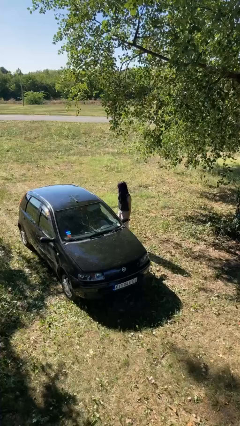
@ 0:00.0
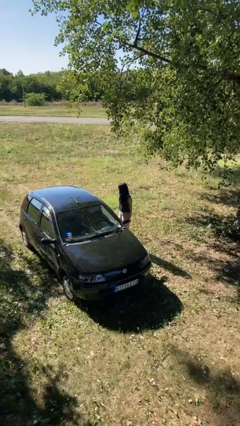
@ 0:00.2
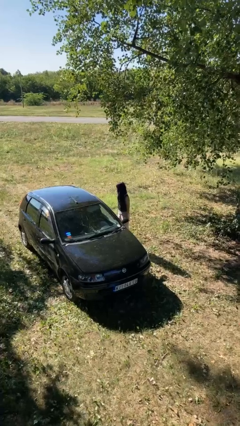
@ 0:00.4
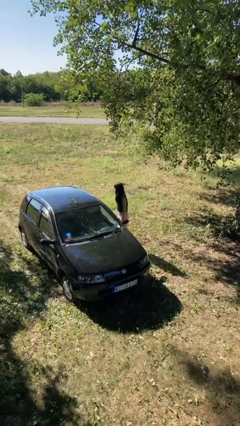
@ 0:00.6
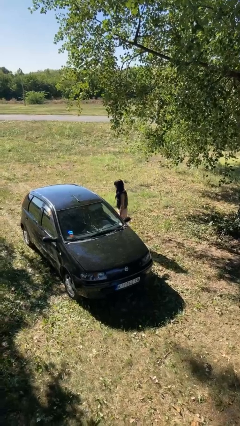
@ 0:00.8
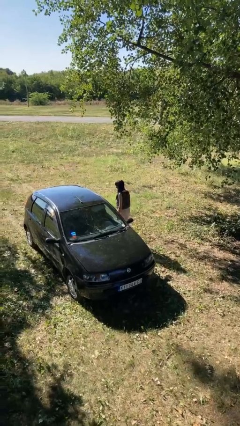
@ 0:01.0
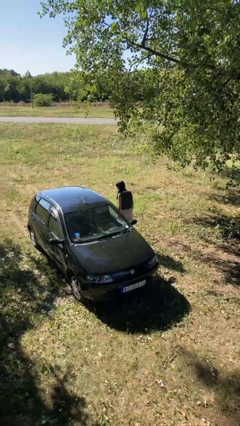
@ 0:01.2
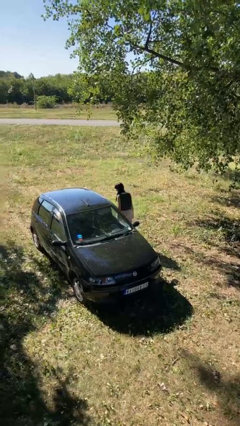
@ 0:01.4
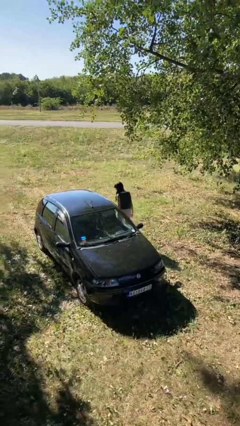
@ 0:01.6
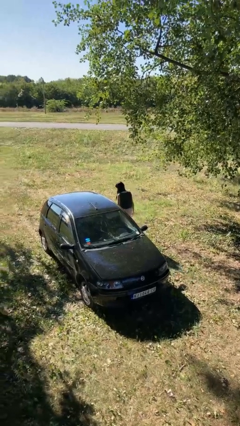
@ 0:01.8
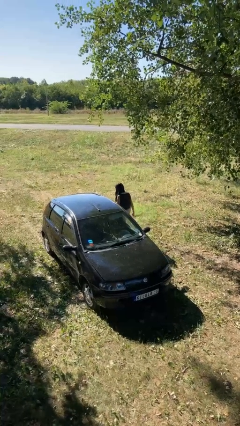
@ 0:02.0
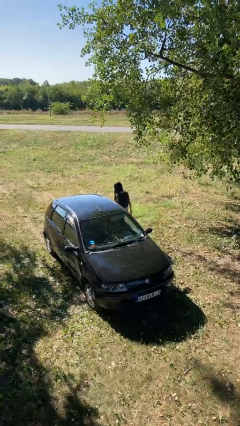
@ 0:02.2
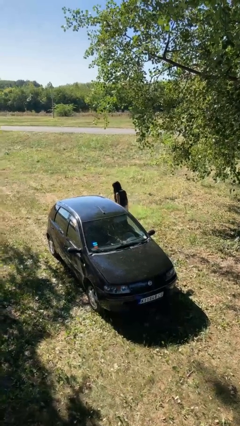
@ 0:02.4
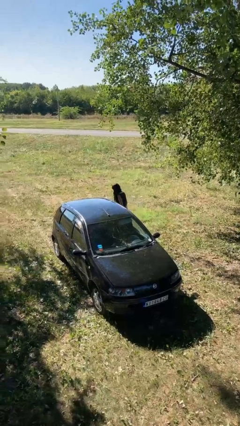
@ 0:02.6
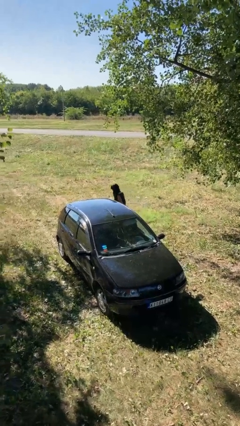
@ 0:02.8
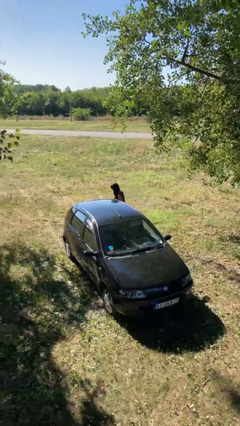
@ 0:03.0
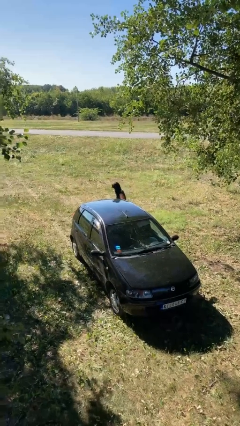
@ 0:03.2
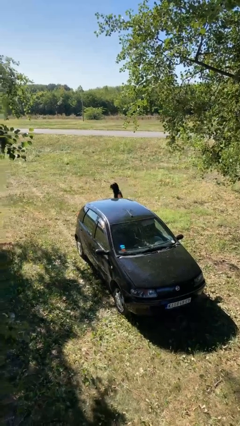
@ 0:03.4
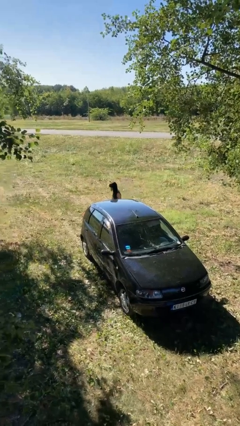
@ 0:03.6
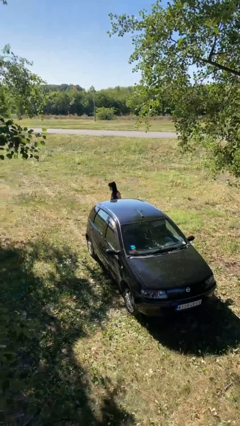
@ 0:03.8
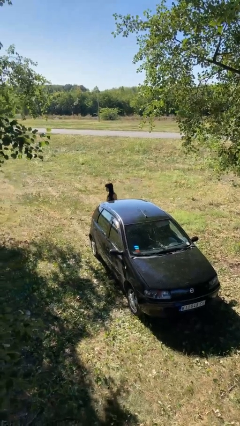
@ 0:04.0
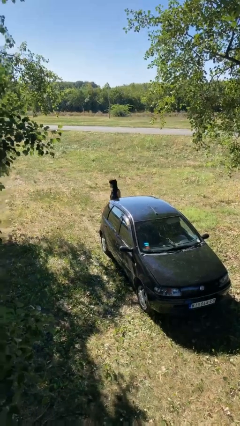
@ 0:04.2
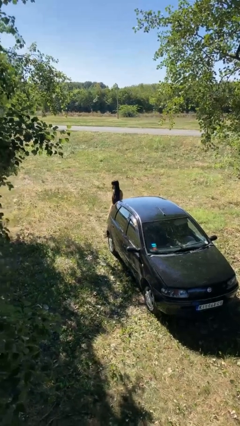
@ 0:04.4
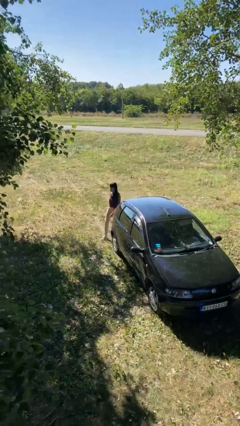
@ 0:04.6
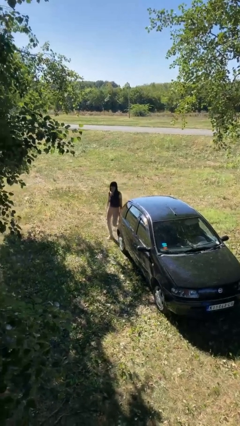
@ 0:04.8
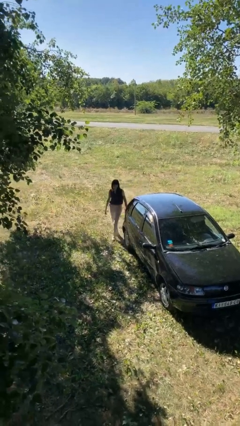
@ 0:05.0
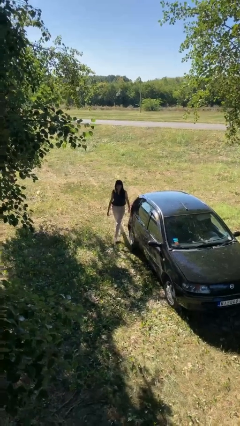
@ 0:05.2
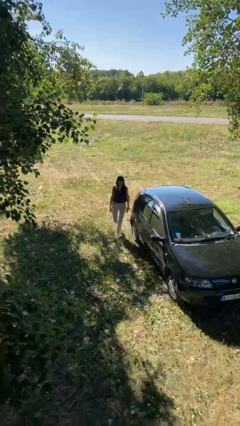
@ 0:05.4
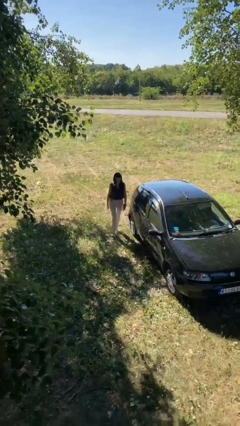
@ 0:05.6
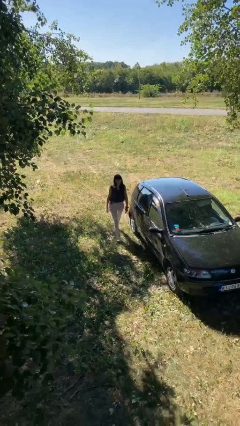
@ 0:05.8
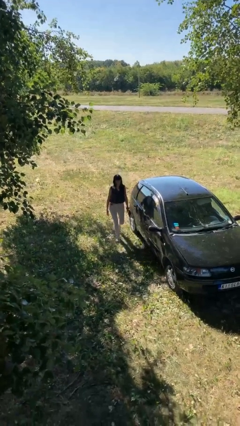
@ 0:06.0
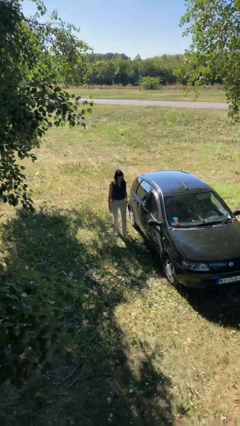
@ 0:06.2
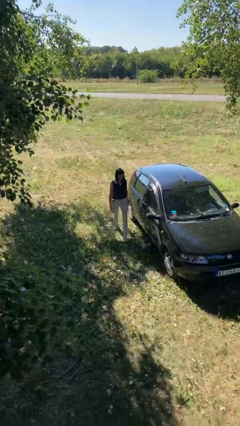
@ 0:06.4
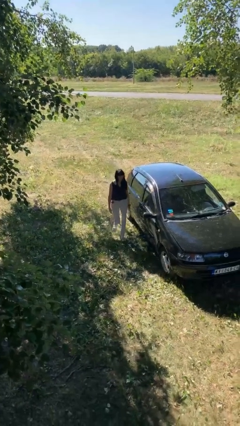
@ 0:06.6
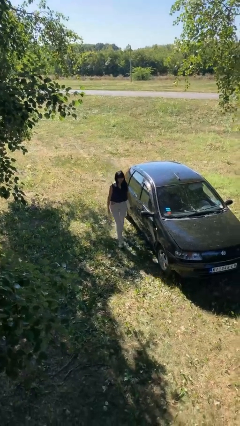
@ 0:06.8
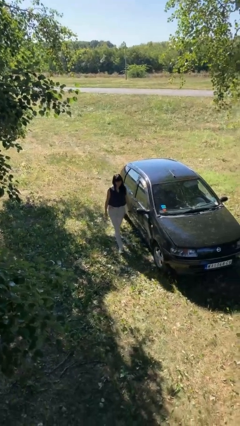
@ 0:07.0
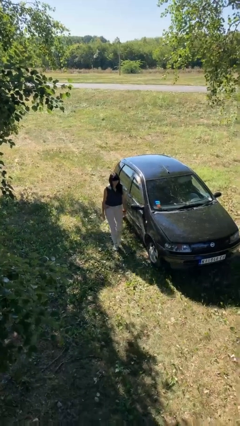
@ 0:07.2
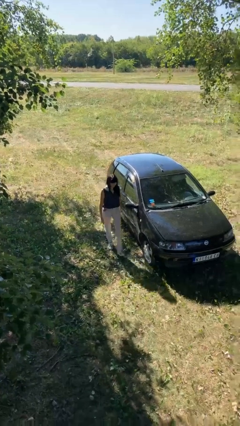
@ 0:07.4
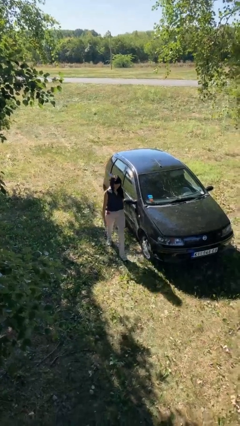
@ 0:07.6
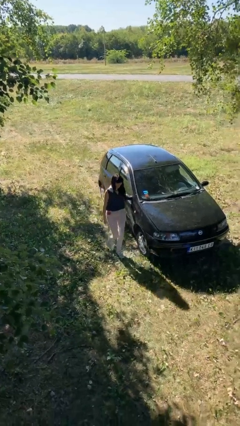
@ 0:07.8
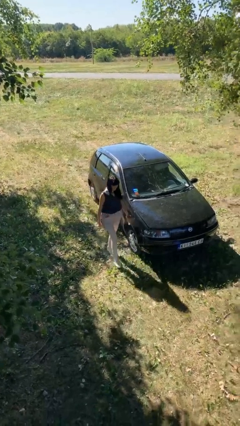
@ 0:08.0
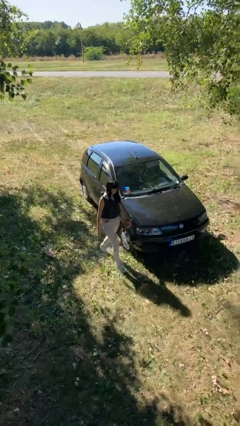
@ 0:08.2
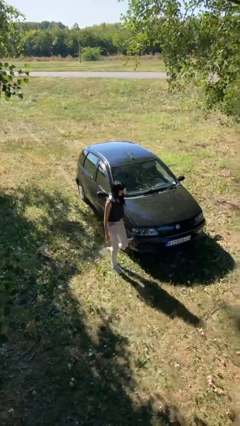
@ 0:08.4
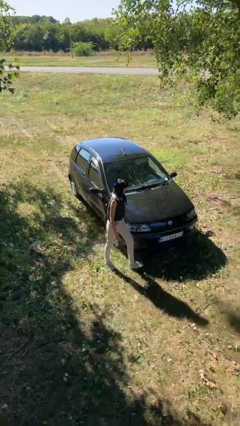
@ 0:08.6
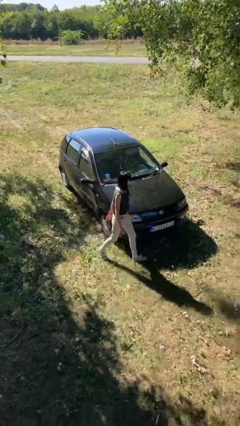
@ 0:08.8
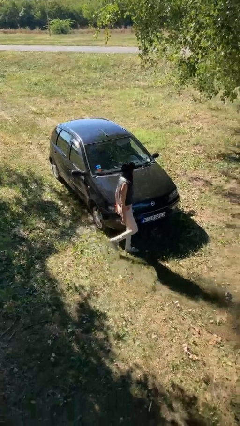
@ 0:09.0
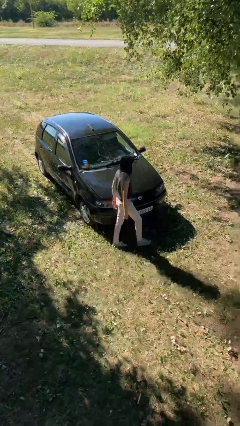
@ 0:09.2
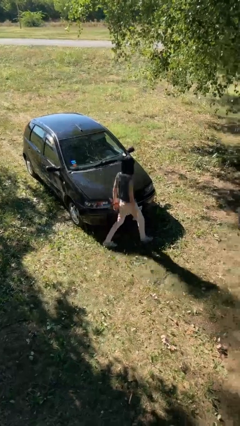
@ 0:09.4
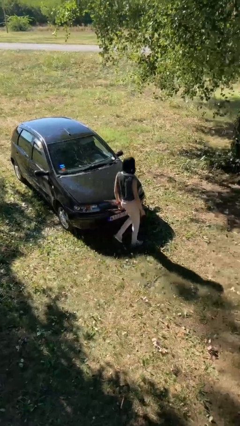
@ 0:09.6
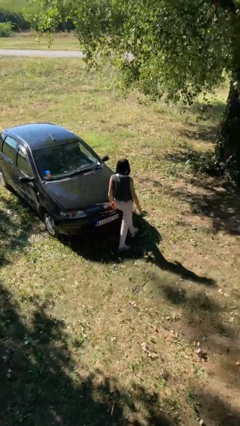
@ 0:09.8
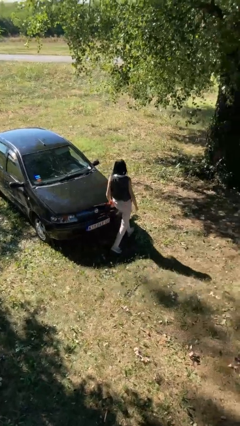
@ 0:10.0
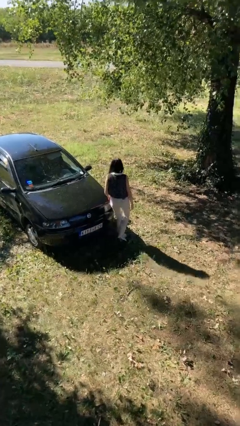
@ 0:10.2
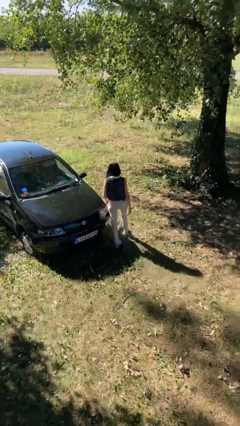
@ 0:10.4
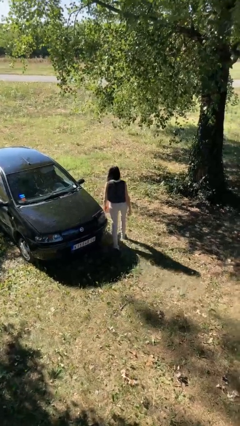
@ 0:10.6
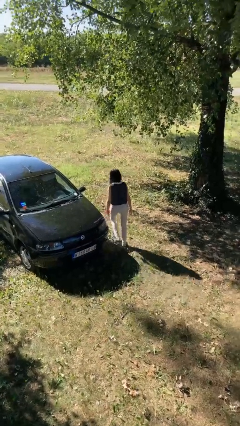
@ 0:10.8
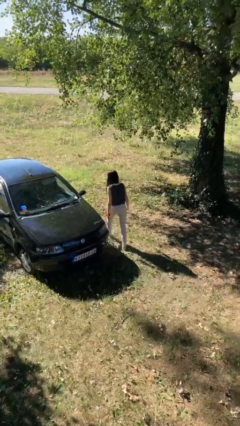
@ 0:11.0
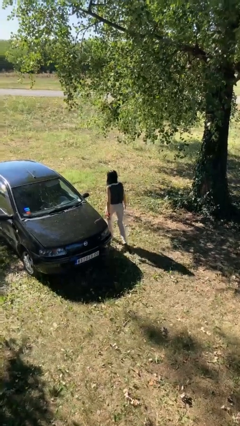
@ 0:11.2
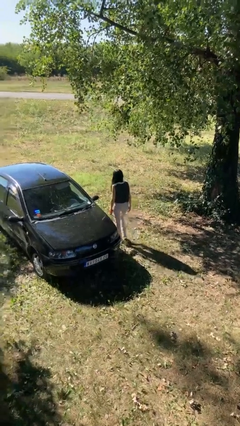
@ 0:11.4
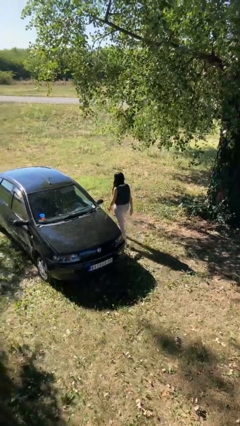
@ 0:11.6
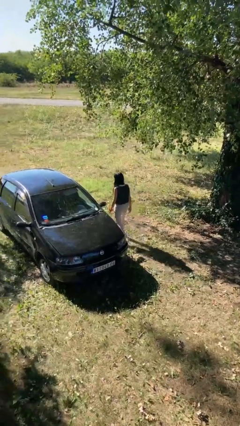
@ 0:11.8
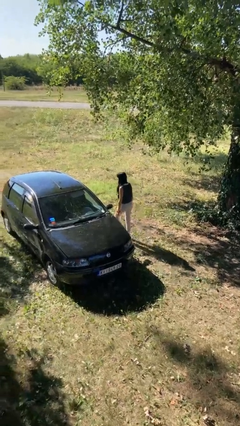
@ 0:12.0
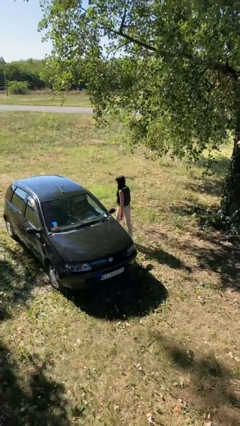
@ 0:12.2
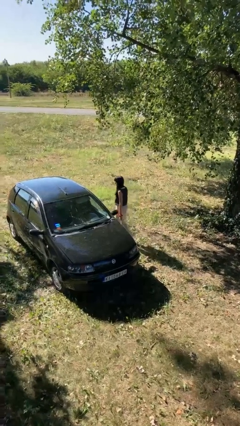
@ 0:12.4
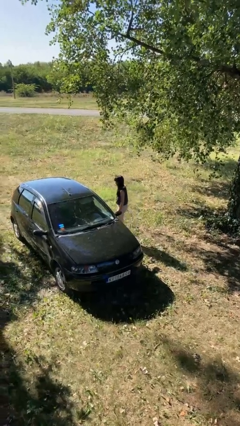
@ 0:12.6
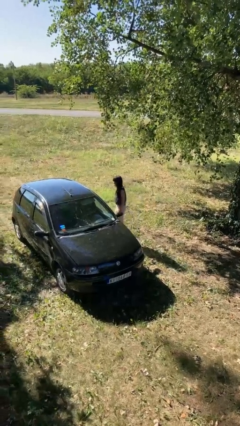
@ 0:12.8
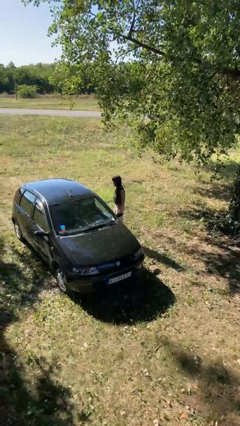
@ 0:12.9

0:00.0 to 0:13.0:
person walks around car

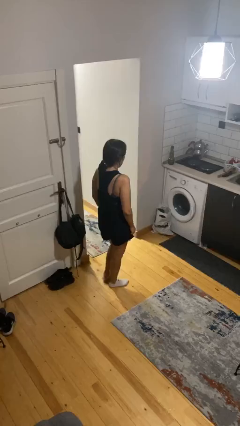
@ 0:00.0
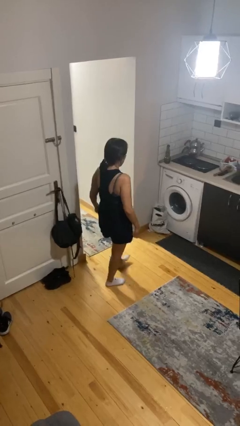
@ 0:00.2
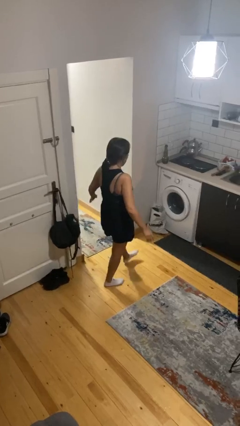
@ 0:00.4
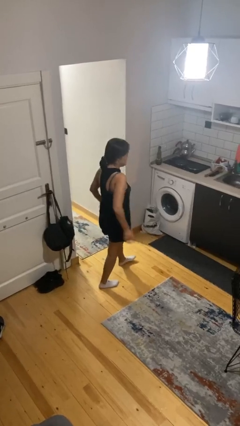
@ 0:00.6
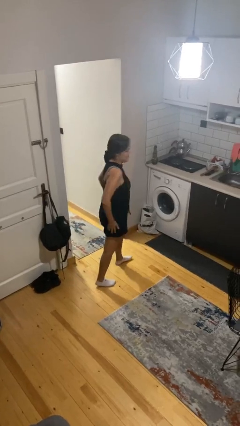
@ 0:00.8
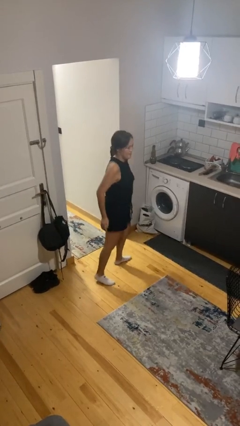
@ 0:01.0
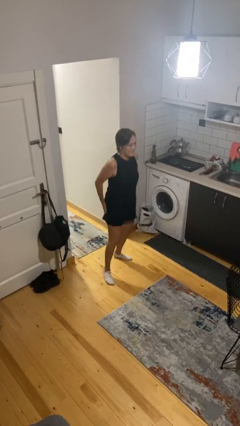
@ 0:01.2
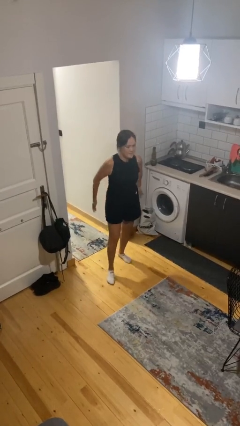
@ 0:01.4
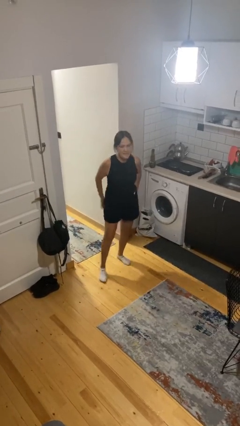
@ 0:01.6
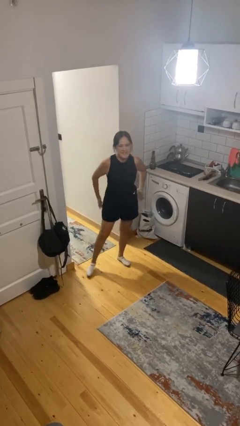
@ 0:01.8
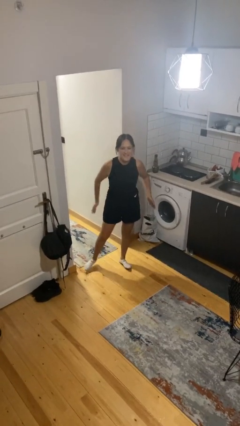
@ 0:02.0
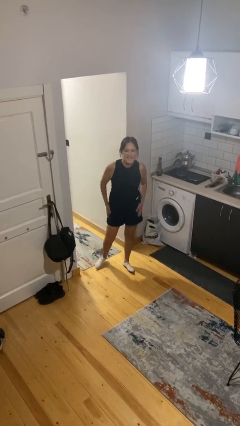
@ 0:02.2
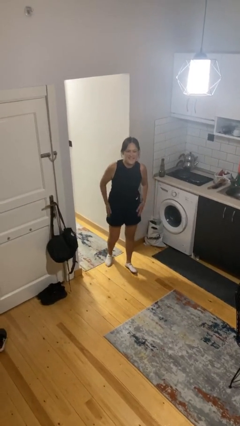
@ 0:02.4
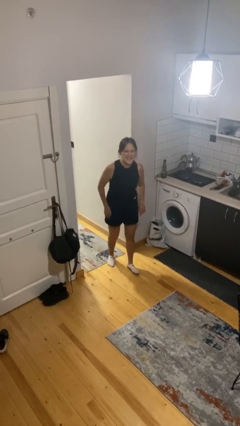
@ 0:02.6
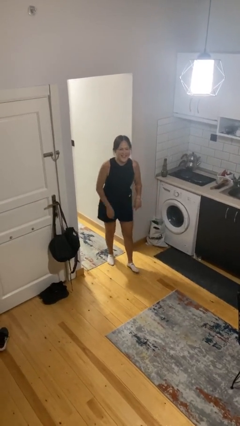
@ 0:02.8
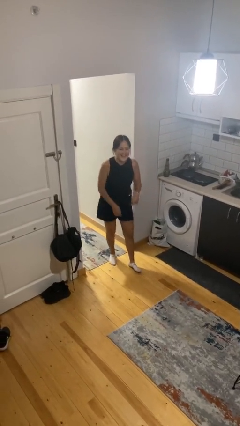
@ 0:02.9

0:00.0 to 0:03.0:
person slaps hands on thighs

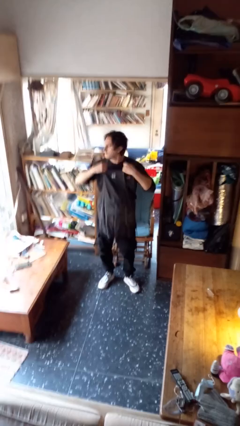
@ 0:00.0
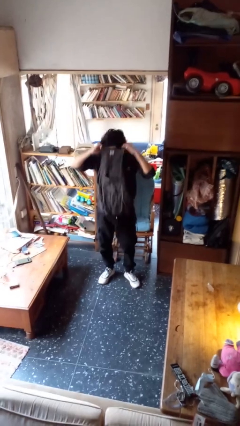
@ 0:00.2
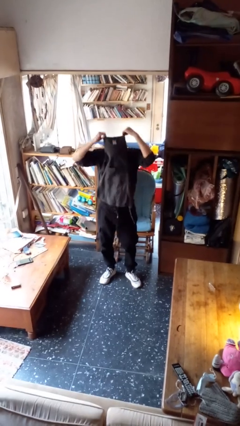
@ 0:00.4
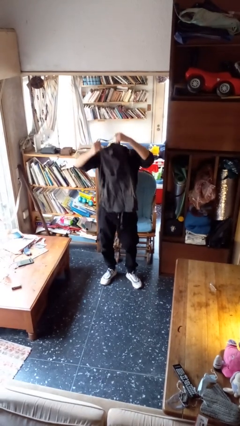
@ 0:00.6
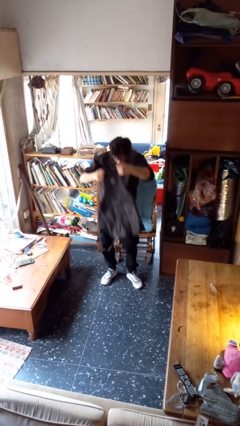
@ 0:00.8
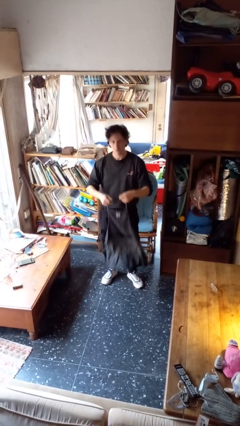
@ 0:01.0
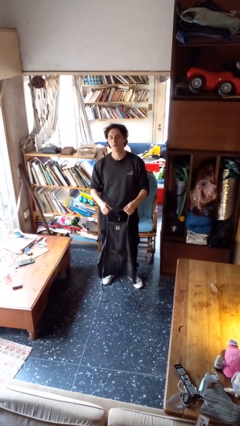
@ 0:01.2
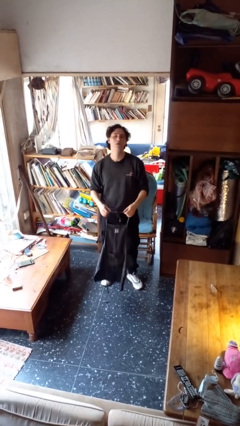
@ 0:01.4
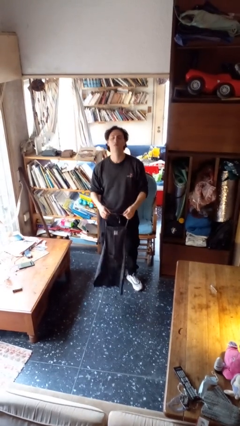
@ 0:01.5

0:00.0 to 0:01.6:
person takes off apron
